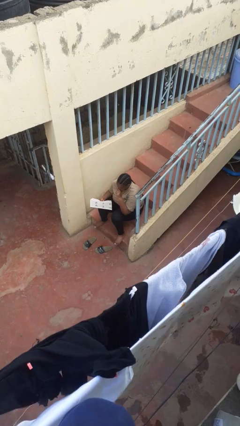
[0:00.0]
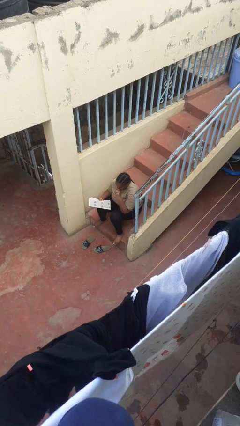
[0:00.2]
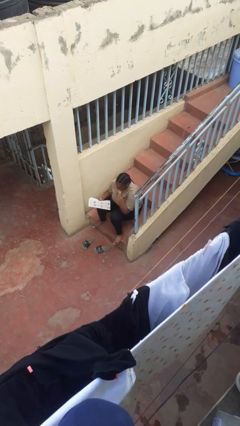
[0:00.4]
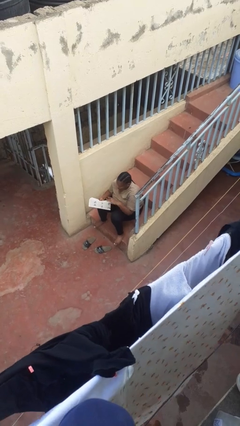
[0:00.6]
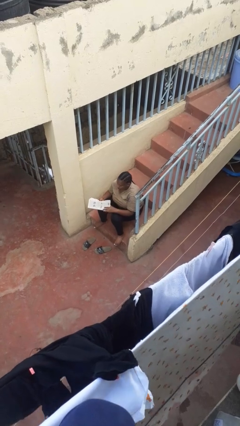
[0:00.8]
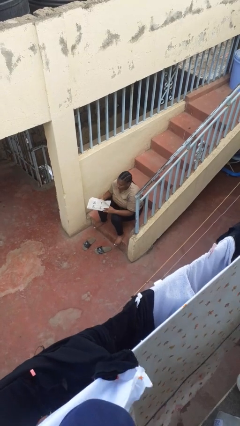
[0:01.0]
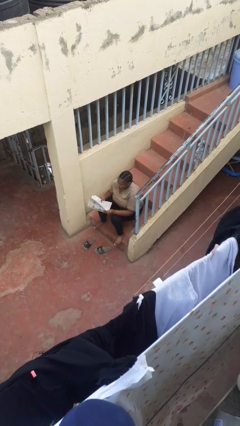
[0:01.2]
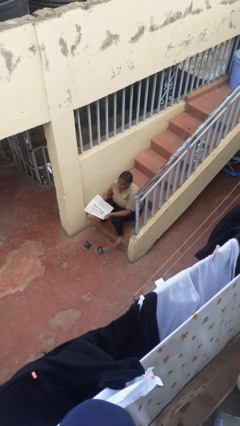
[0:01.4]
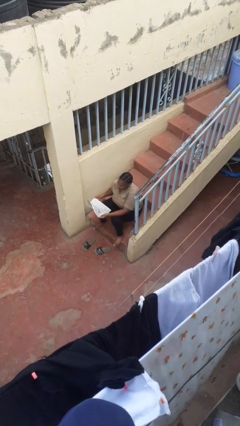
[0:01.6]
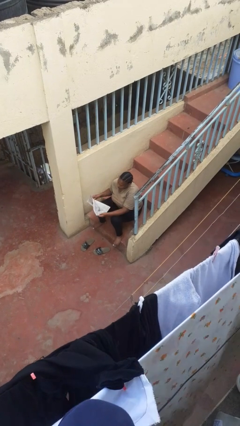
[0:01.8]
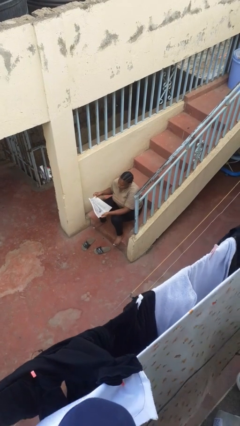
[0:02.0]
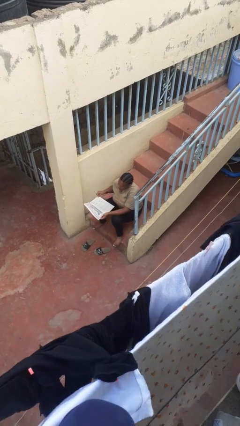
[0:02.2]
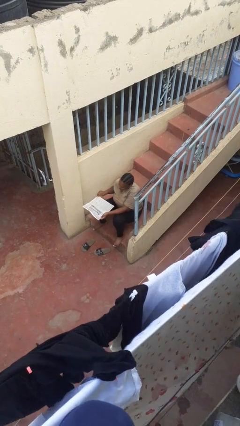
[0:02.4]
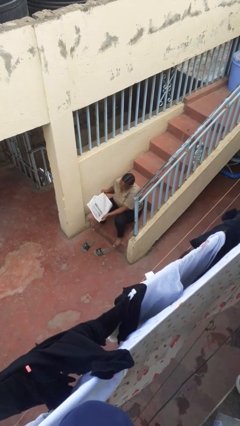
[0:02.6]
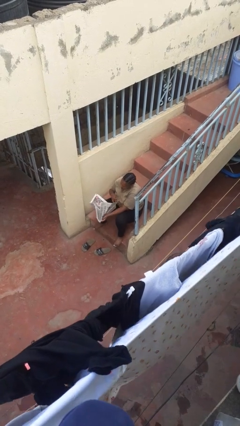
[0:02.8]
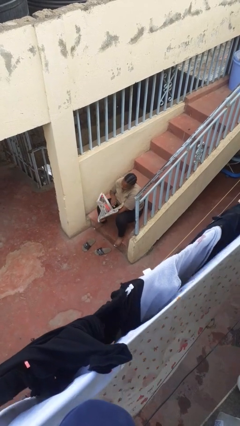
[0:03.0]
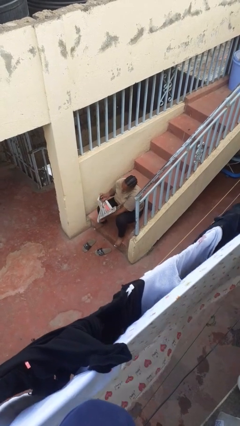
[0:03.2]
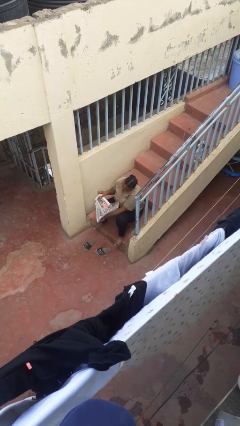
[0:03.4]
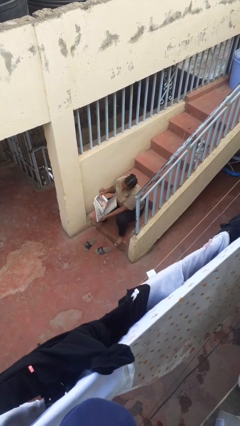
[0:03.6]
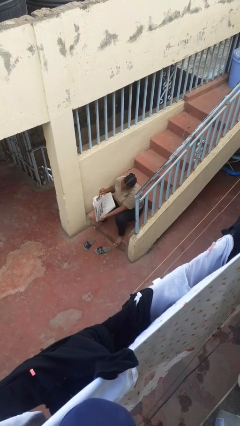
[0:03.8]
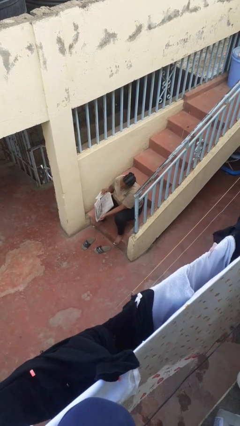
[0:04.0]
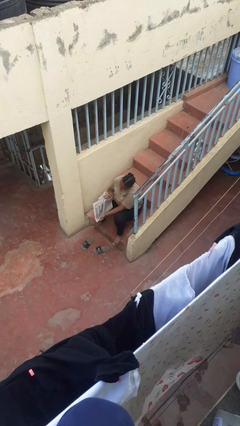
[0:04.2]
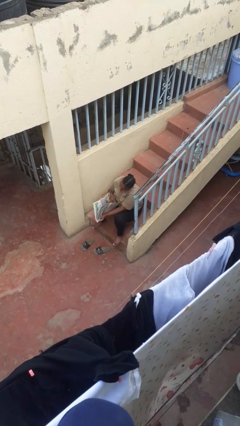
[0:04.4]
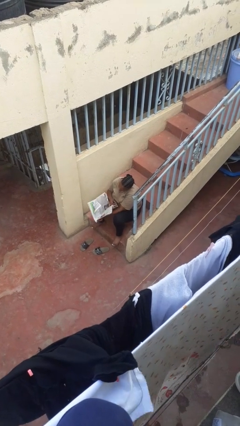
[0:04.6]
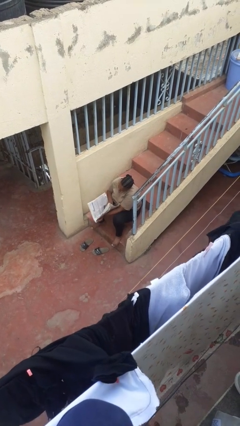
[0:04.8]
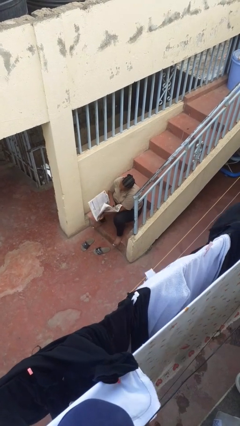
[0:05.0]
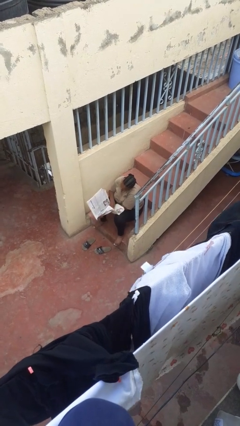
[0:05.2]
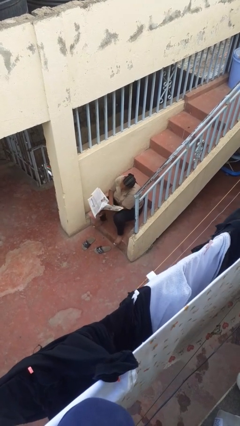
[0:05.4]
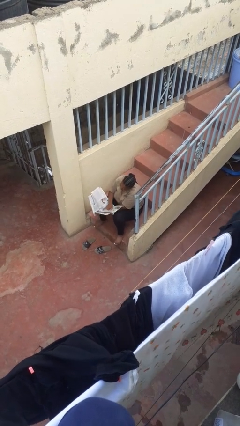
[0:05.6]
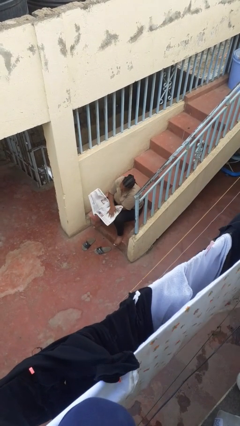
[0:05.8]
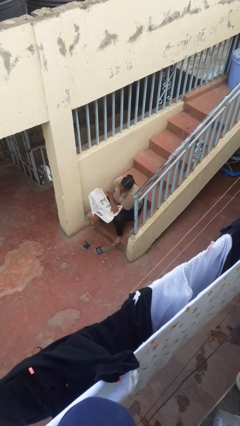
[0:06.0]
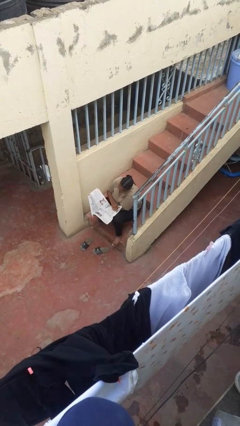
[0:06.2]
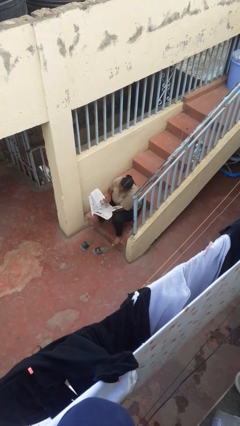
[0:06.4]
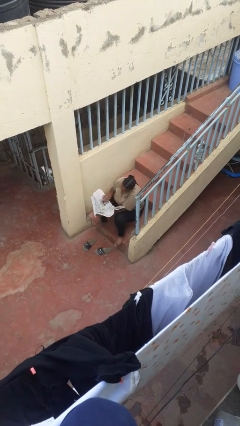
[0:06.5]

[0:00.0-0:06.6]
person reads newspaper

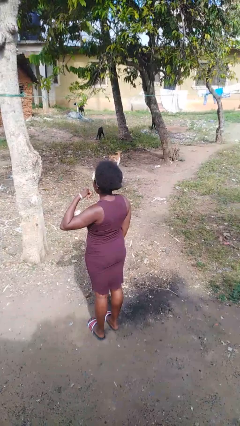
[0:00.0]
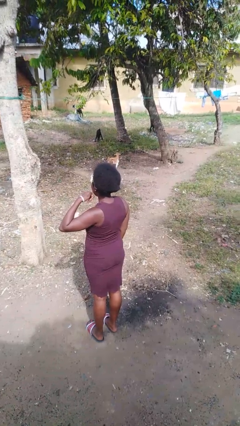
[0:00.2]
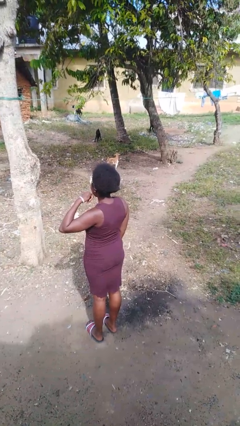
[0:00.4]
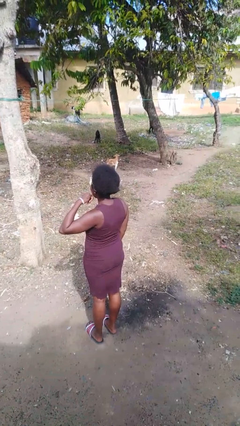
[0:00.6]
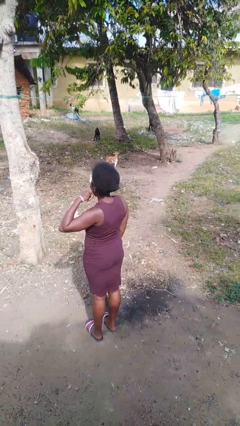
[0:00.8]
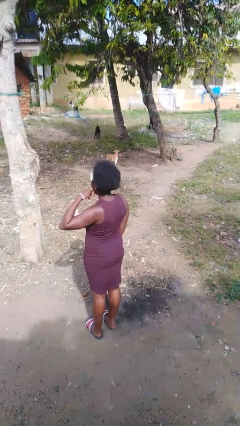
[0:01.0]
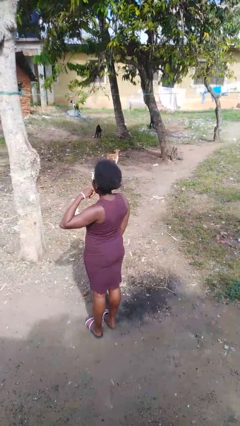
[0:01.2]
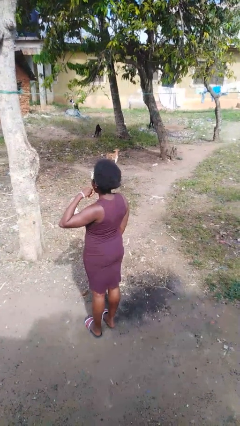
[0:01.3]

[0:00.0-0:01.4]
person gestures call me

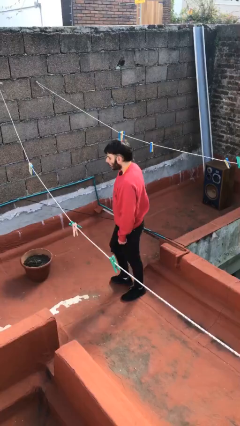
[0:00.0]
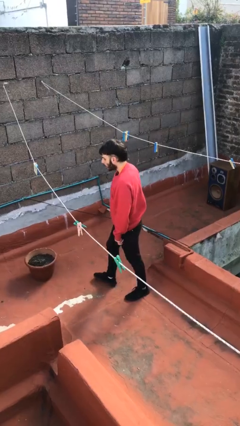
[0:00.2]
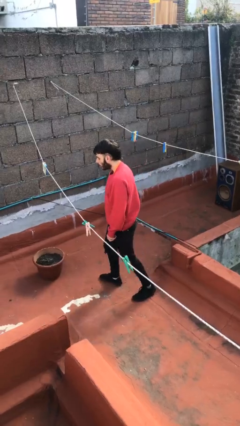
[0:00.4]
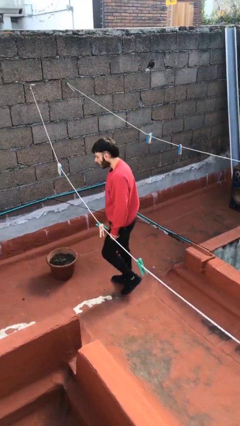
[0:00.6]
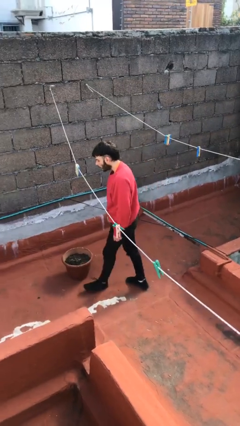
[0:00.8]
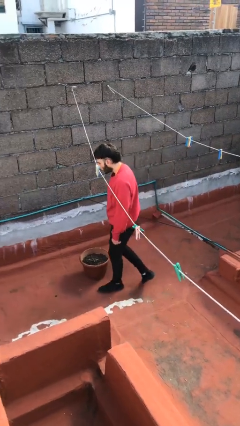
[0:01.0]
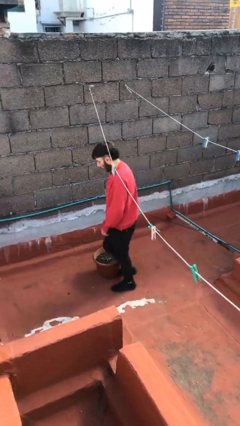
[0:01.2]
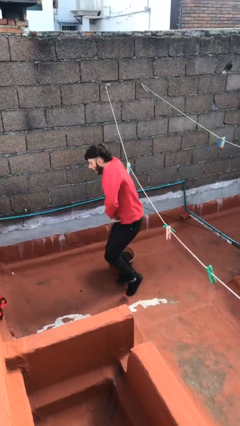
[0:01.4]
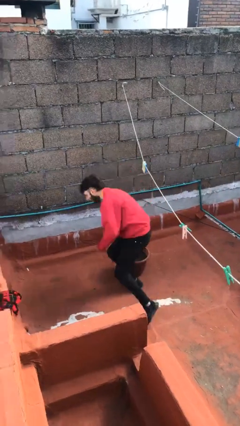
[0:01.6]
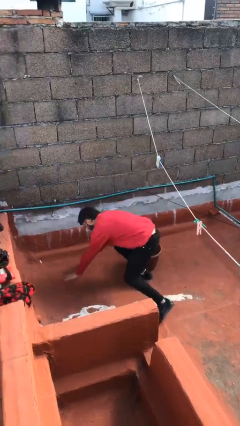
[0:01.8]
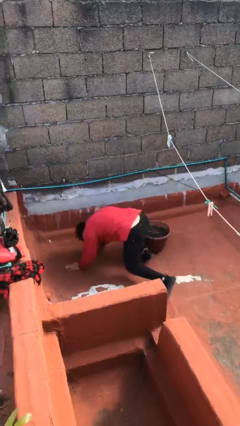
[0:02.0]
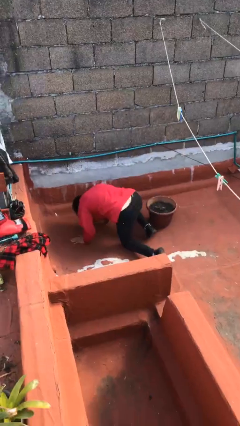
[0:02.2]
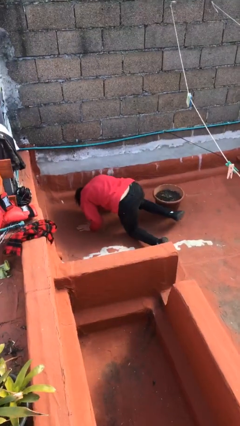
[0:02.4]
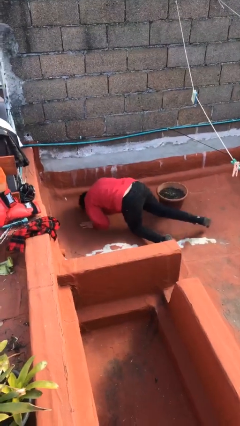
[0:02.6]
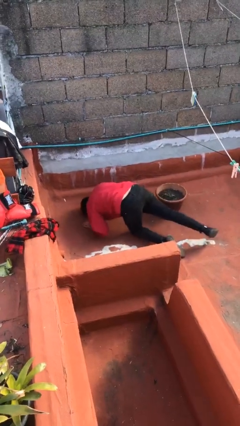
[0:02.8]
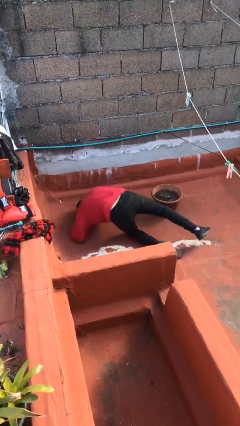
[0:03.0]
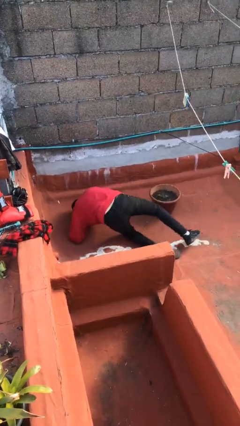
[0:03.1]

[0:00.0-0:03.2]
person trips on object on floor

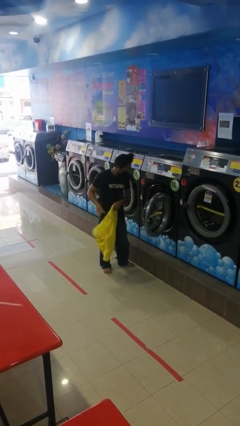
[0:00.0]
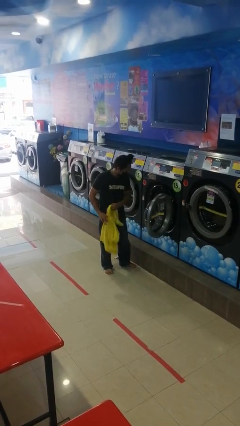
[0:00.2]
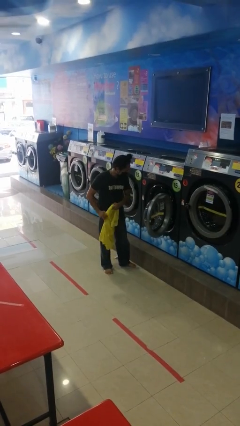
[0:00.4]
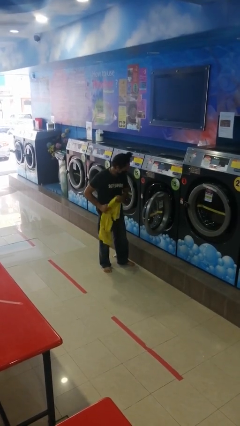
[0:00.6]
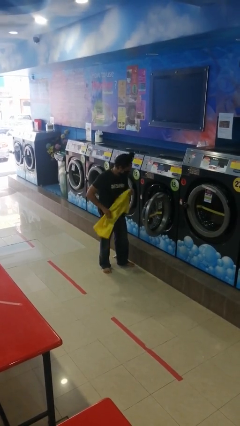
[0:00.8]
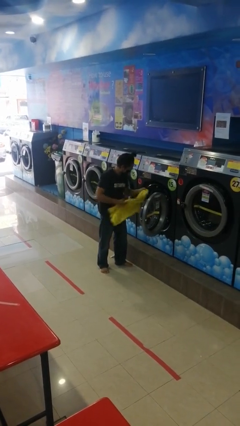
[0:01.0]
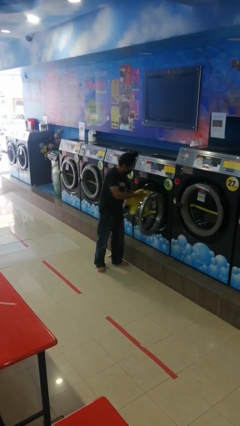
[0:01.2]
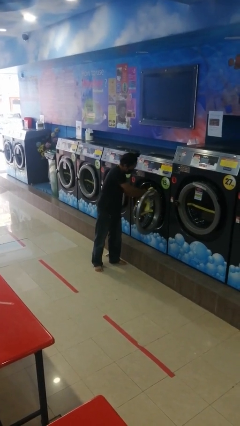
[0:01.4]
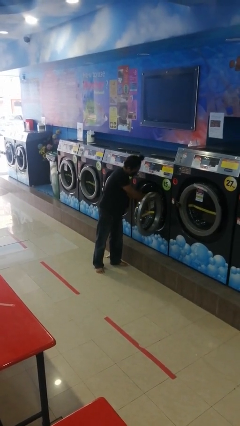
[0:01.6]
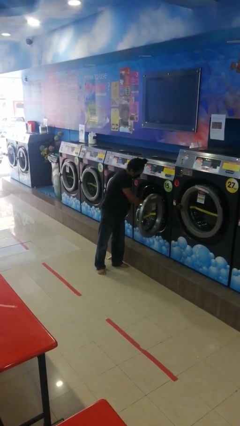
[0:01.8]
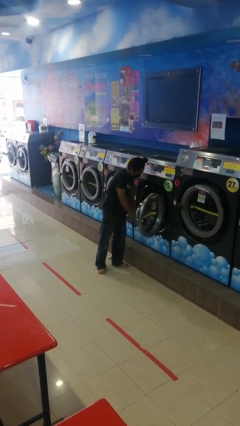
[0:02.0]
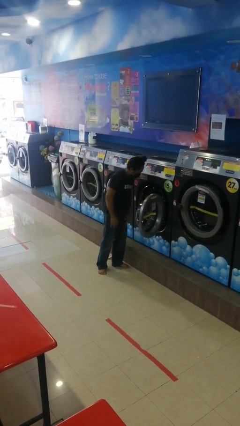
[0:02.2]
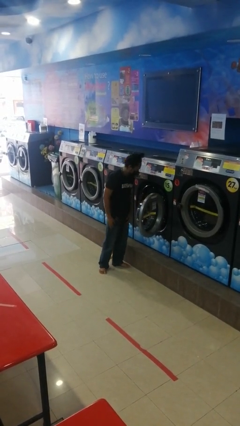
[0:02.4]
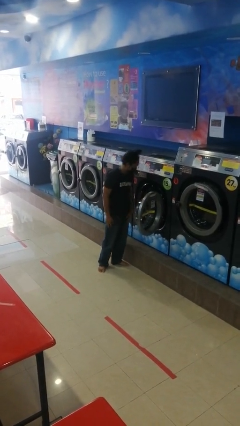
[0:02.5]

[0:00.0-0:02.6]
person loads clotheswasher

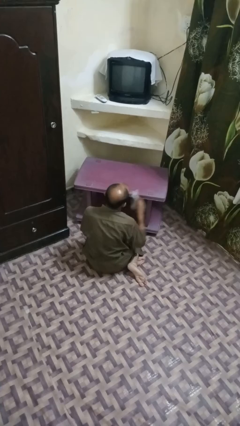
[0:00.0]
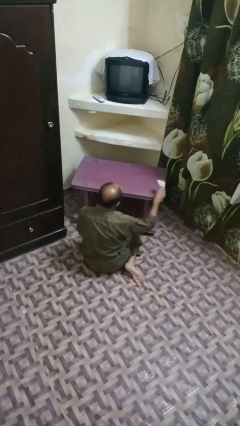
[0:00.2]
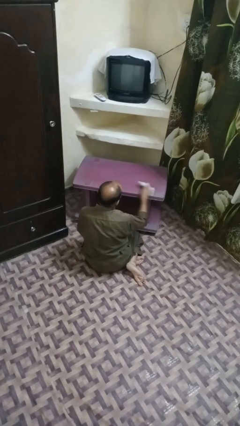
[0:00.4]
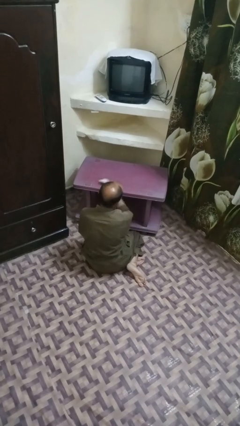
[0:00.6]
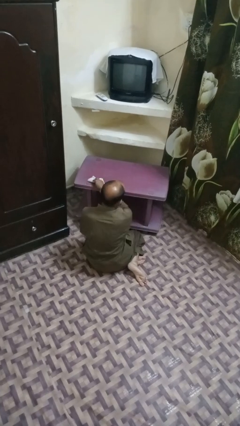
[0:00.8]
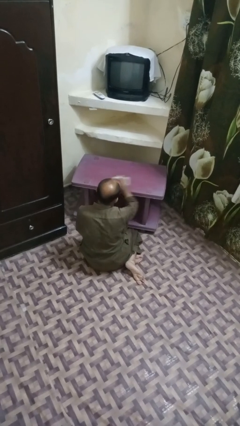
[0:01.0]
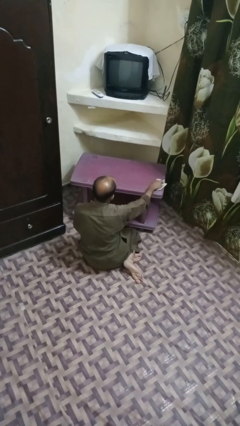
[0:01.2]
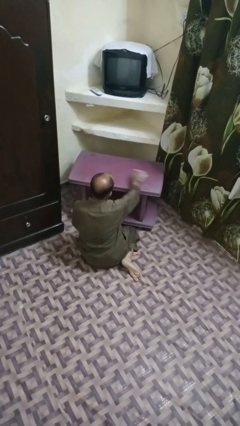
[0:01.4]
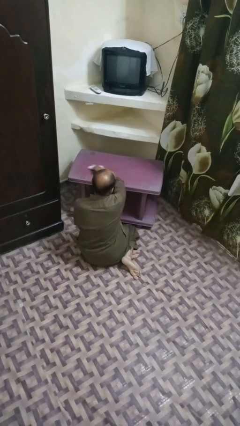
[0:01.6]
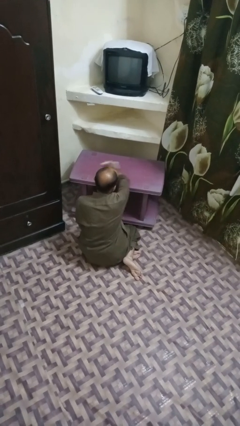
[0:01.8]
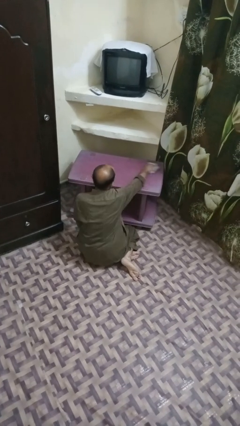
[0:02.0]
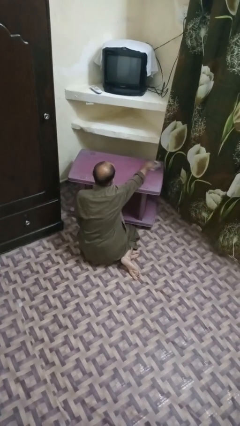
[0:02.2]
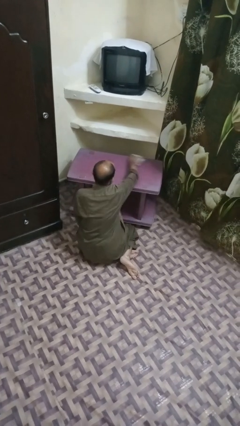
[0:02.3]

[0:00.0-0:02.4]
person cleans table with rag

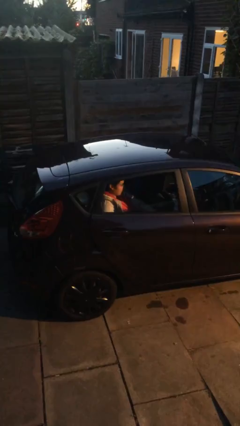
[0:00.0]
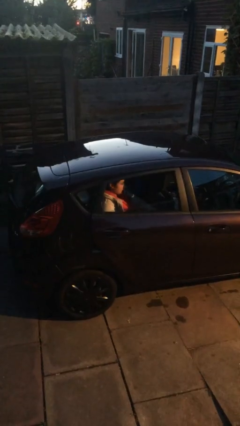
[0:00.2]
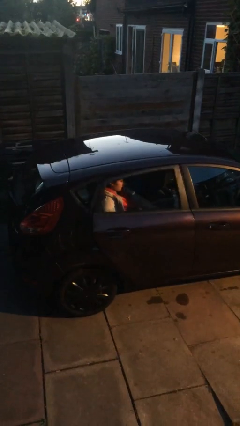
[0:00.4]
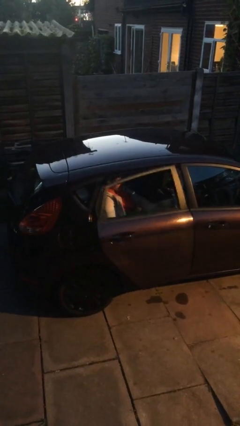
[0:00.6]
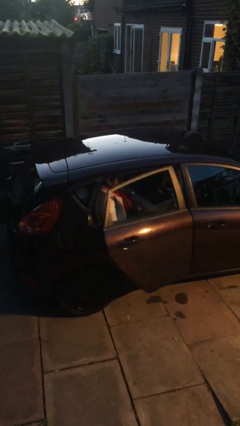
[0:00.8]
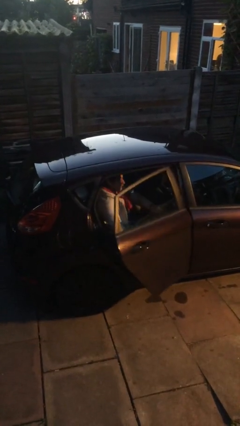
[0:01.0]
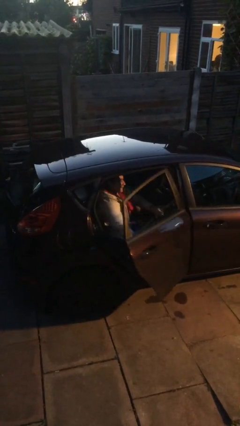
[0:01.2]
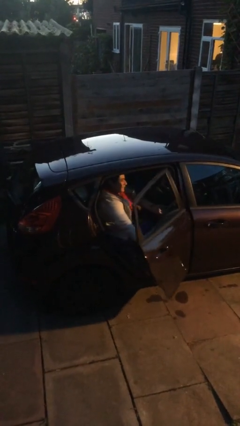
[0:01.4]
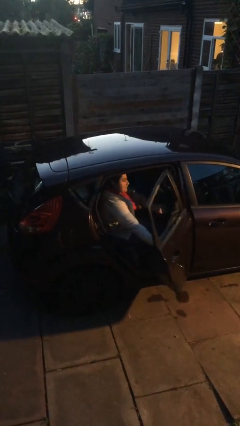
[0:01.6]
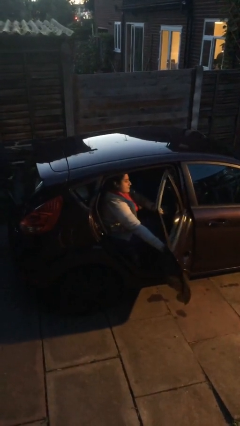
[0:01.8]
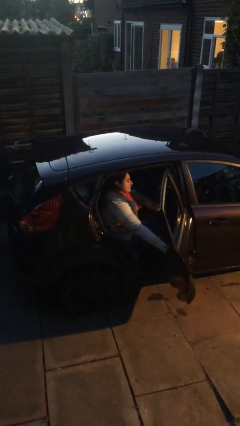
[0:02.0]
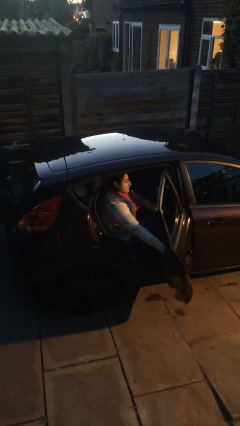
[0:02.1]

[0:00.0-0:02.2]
person opens car door
